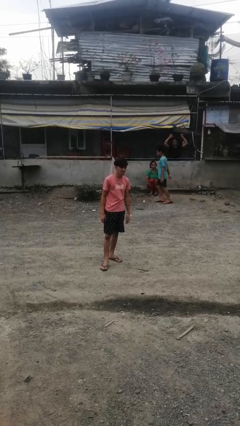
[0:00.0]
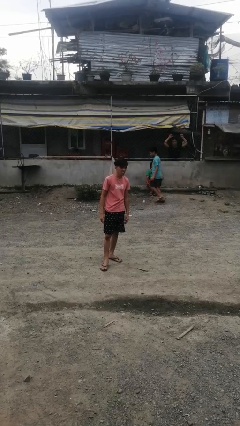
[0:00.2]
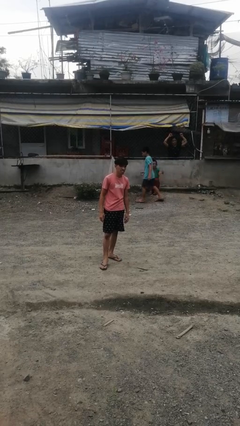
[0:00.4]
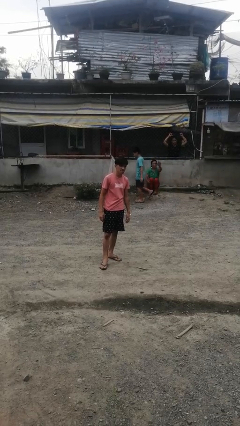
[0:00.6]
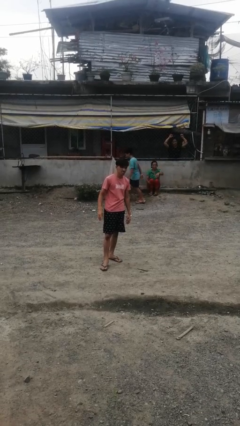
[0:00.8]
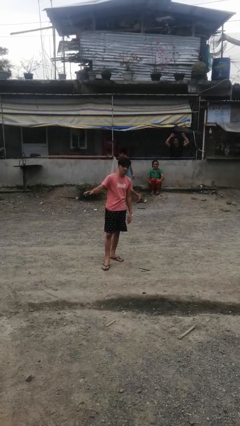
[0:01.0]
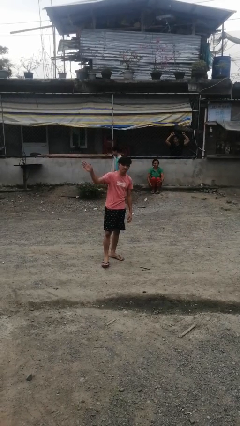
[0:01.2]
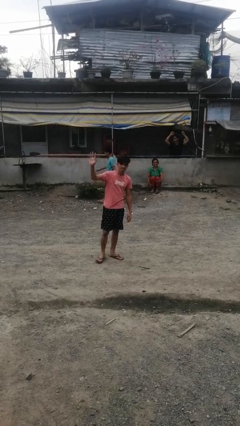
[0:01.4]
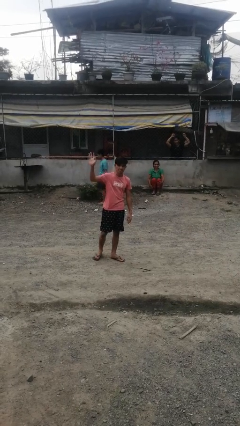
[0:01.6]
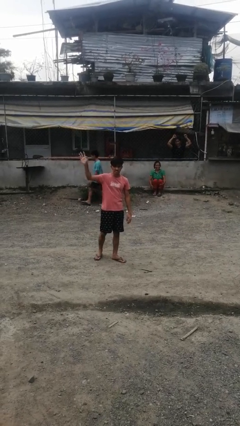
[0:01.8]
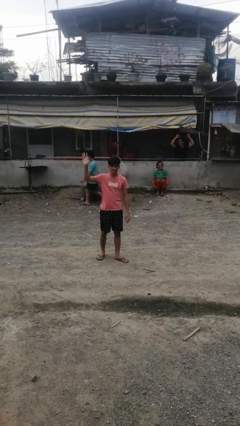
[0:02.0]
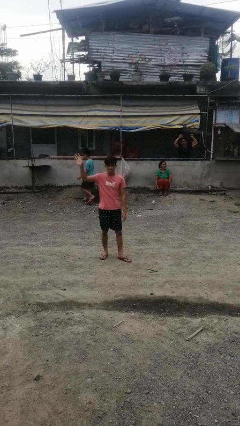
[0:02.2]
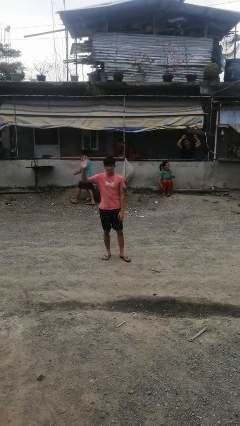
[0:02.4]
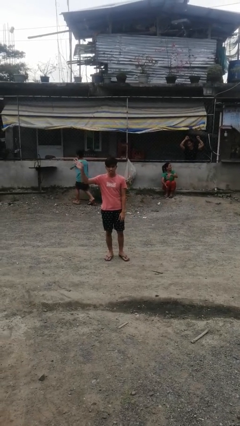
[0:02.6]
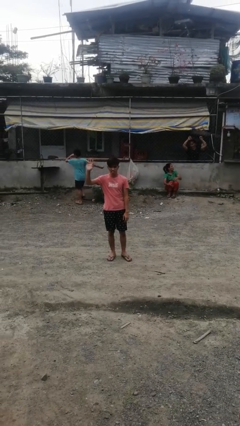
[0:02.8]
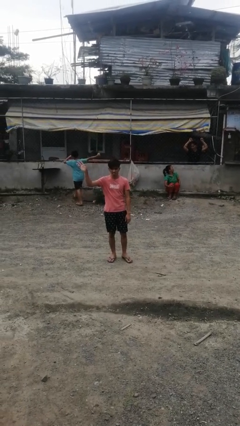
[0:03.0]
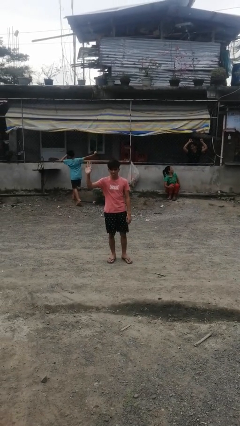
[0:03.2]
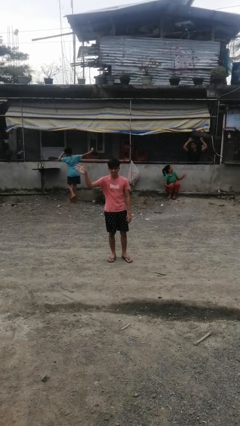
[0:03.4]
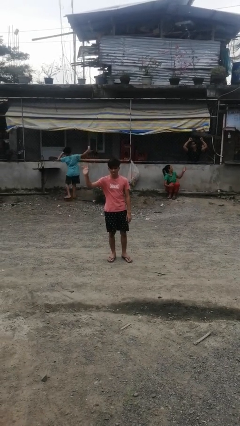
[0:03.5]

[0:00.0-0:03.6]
person waves at person

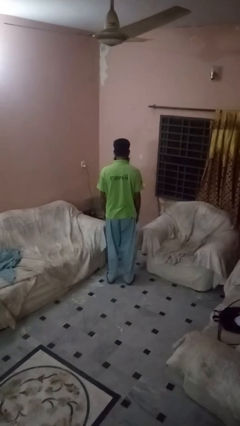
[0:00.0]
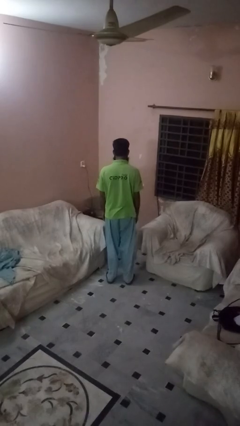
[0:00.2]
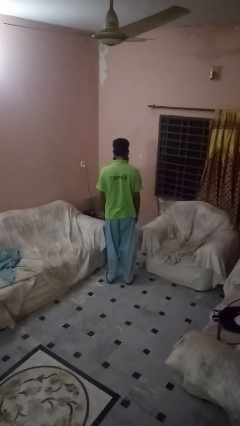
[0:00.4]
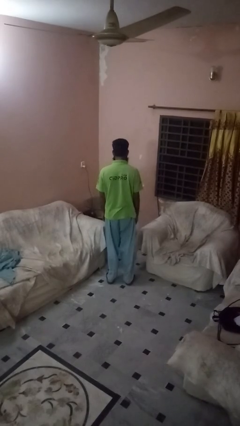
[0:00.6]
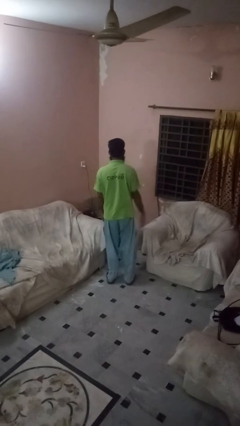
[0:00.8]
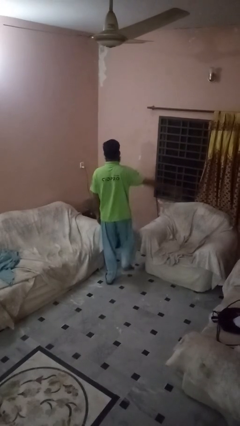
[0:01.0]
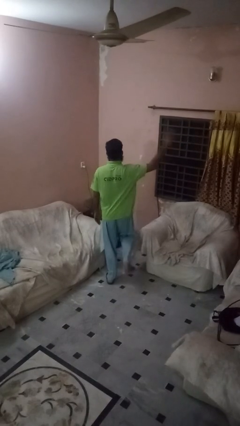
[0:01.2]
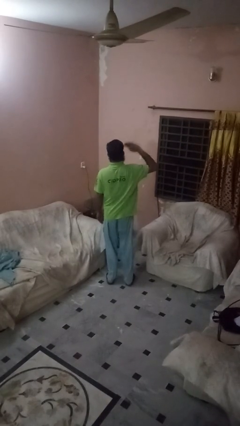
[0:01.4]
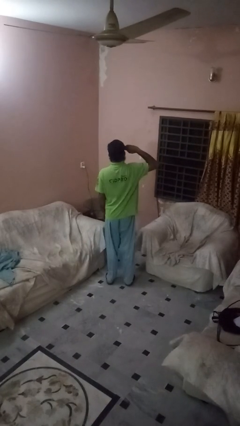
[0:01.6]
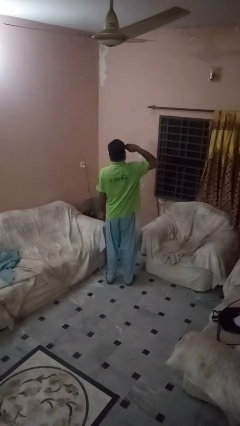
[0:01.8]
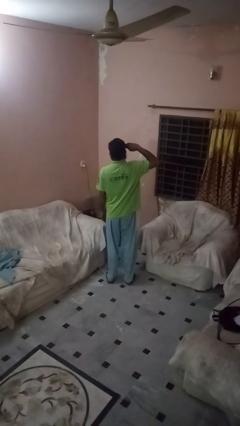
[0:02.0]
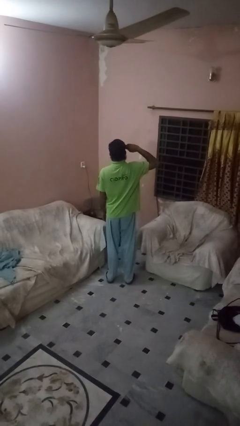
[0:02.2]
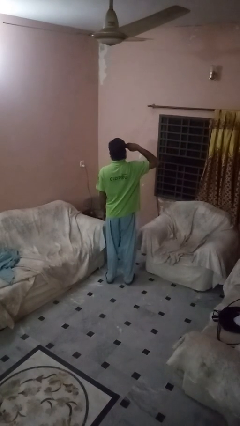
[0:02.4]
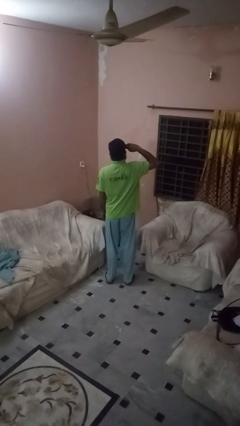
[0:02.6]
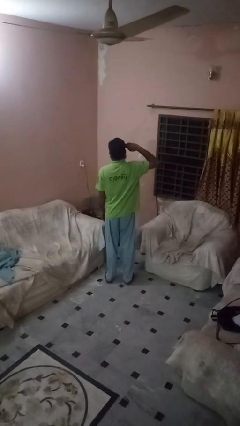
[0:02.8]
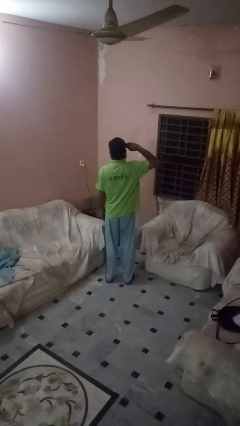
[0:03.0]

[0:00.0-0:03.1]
person salutes

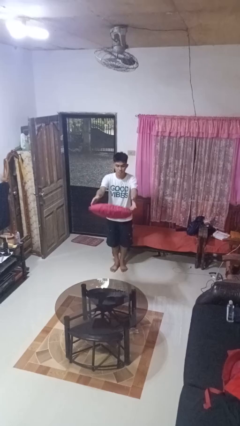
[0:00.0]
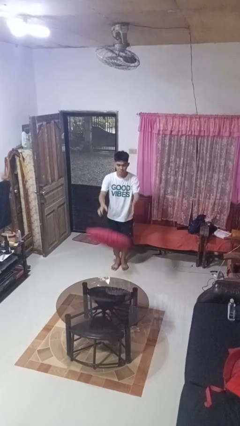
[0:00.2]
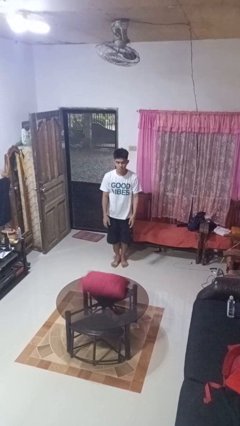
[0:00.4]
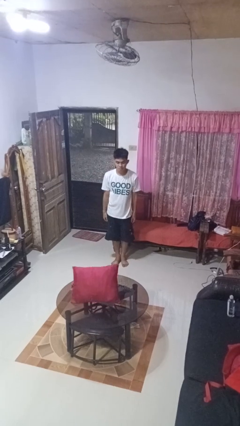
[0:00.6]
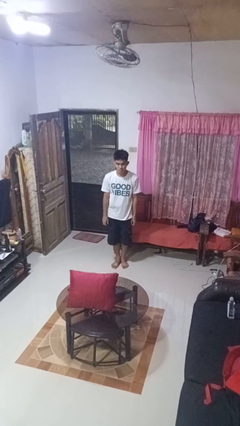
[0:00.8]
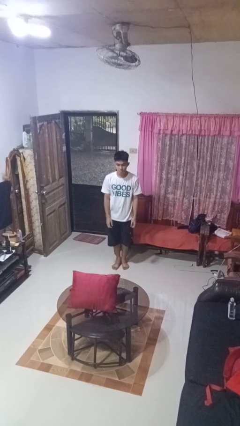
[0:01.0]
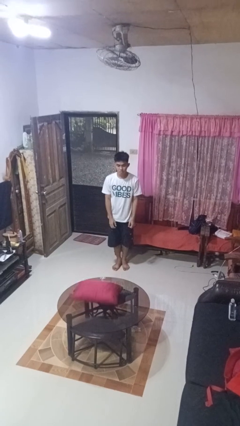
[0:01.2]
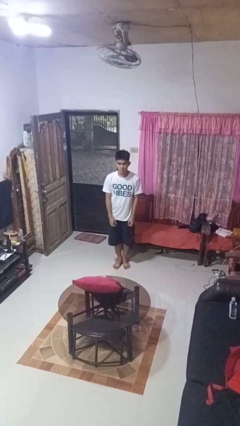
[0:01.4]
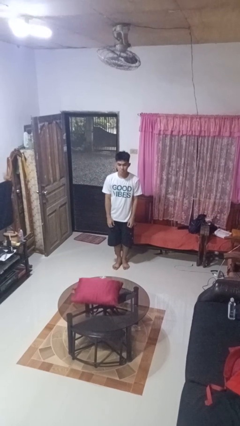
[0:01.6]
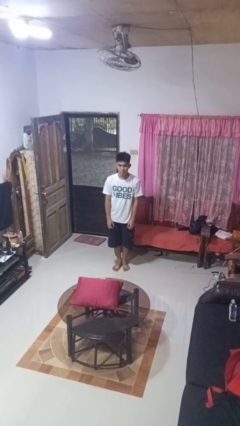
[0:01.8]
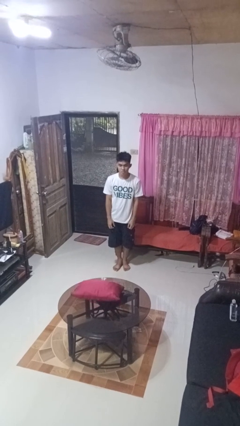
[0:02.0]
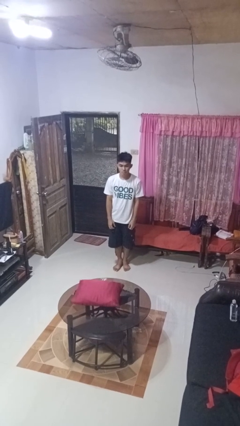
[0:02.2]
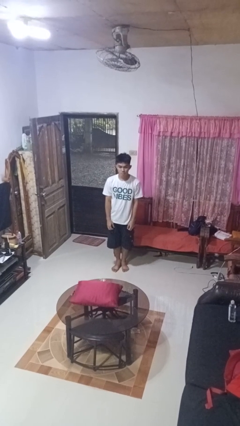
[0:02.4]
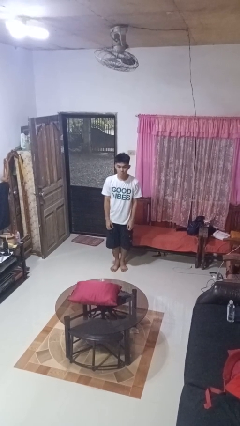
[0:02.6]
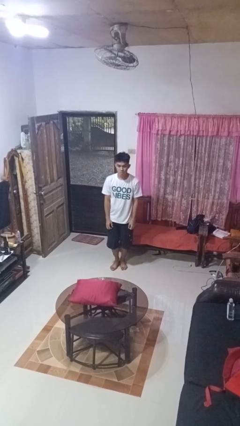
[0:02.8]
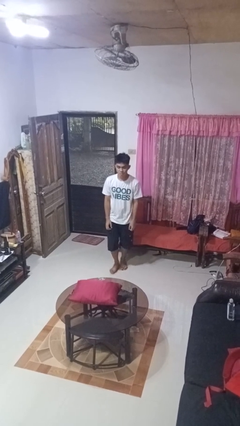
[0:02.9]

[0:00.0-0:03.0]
person throws object on table

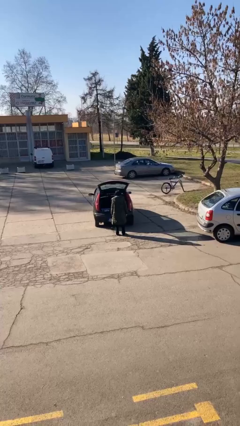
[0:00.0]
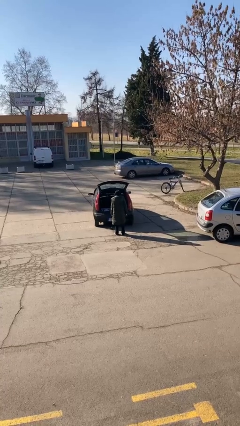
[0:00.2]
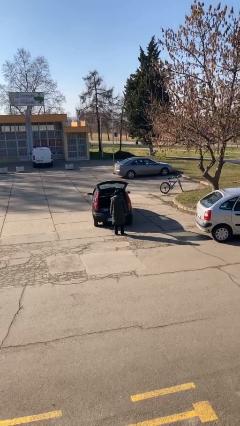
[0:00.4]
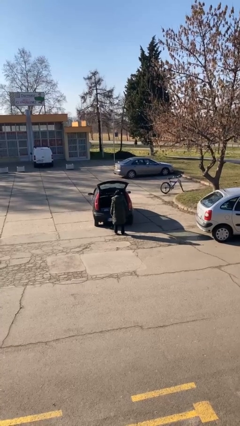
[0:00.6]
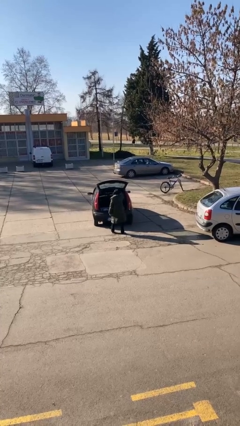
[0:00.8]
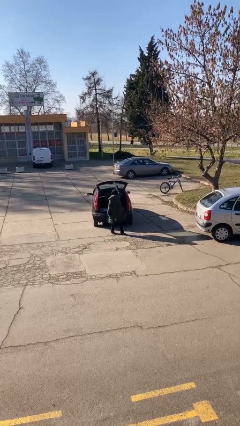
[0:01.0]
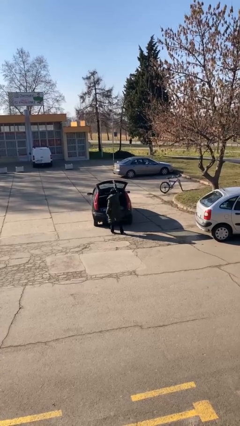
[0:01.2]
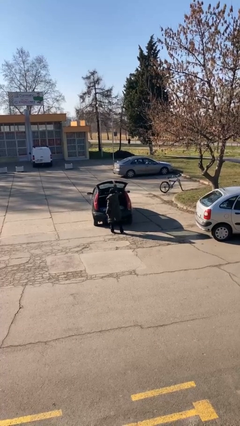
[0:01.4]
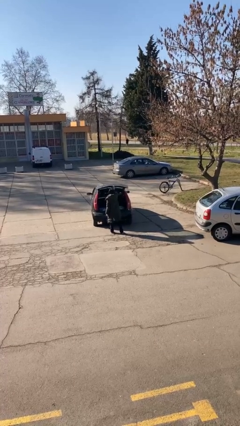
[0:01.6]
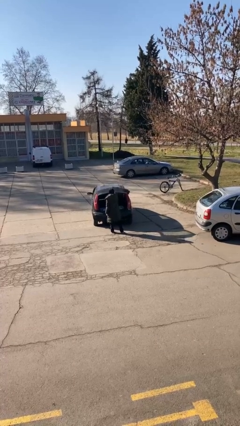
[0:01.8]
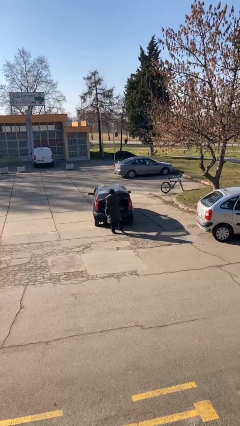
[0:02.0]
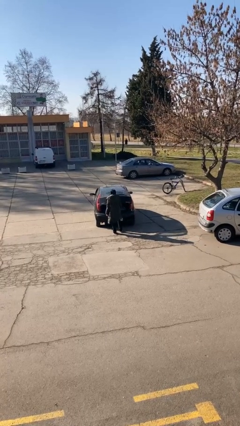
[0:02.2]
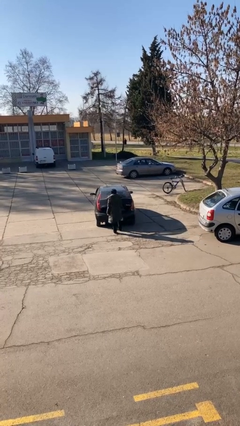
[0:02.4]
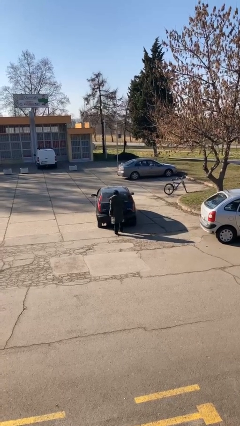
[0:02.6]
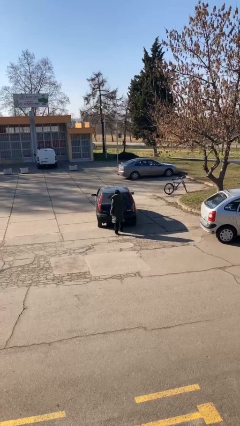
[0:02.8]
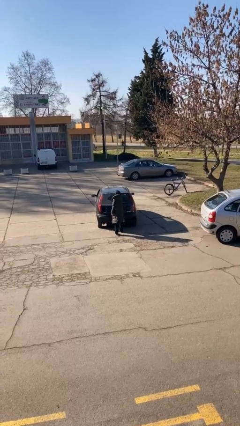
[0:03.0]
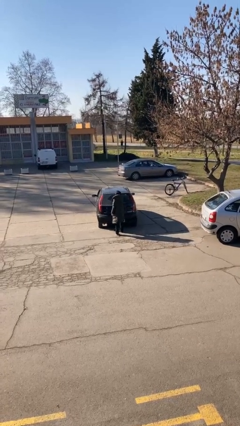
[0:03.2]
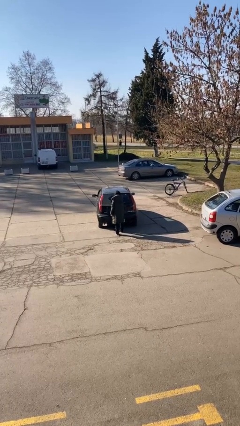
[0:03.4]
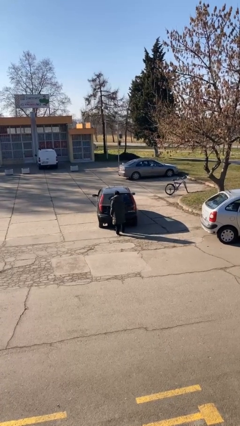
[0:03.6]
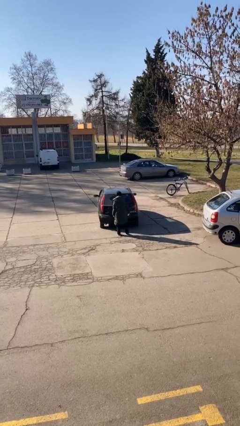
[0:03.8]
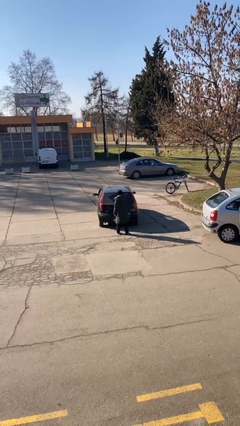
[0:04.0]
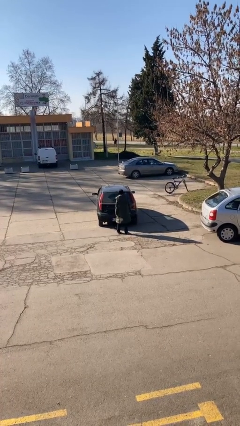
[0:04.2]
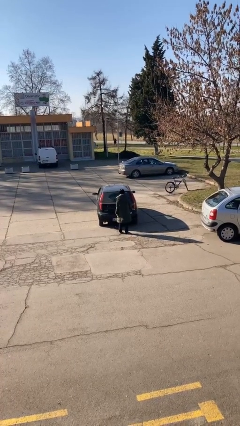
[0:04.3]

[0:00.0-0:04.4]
person closes car trunk

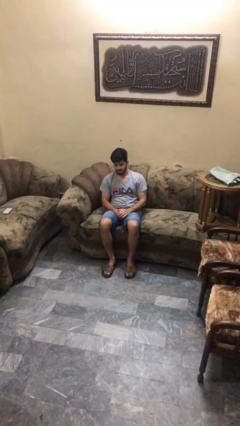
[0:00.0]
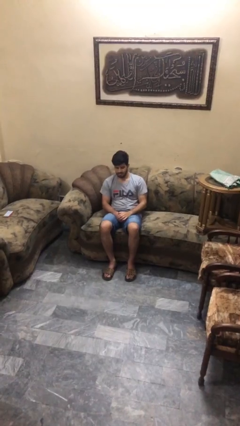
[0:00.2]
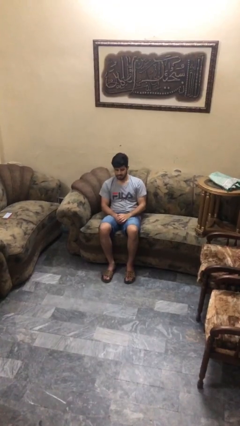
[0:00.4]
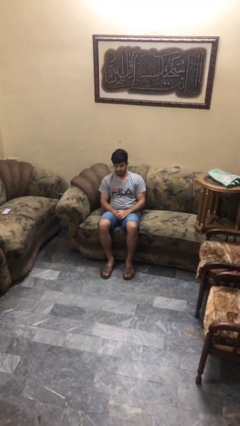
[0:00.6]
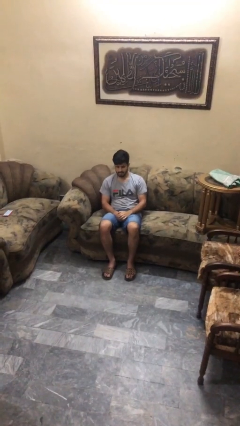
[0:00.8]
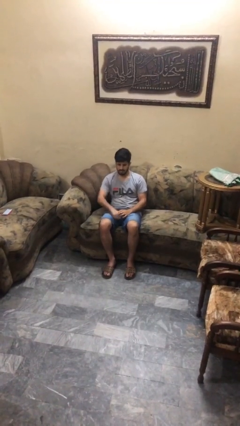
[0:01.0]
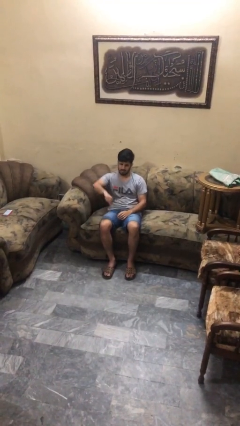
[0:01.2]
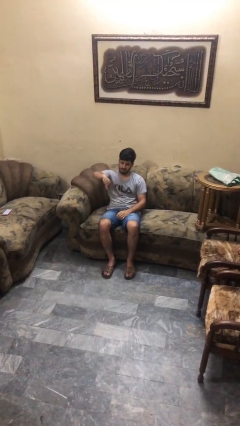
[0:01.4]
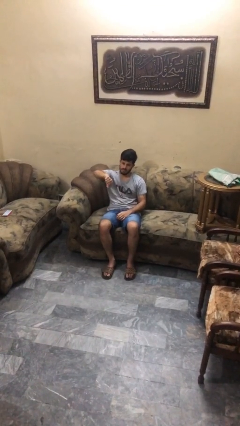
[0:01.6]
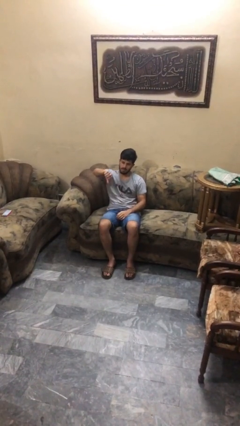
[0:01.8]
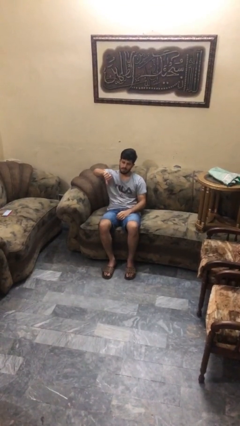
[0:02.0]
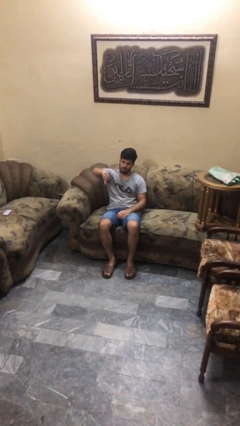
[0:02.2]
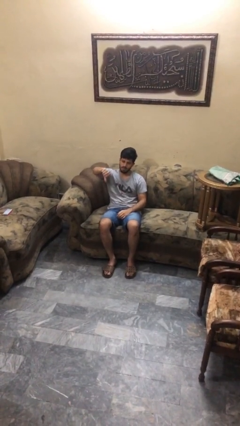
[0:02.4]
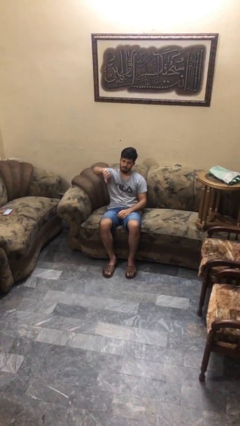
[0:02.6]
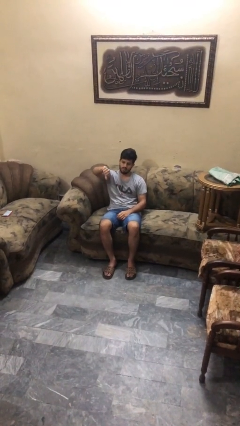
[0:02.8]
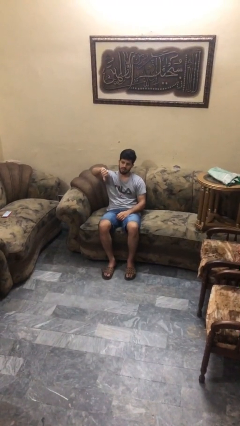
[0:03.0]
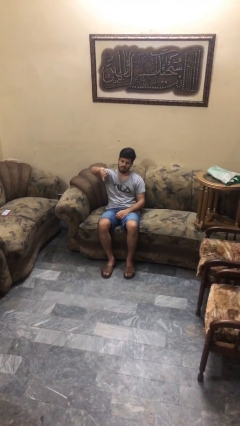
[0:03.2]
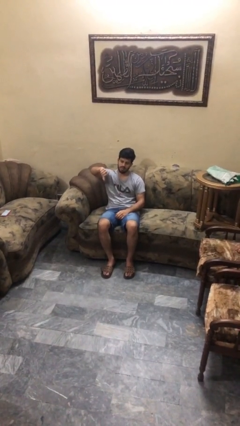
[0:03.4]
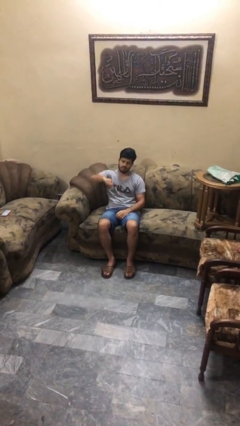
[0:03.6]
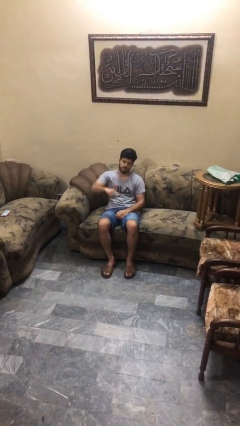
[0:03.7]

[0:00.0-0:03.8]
person gestures thumbs down
